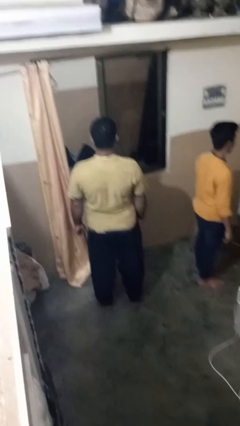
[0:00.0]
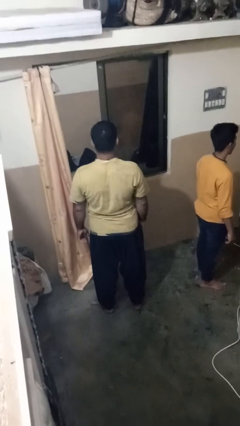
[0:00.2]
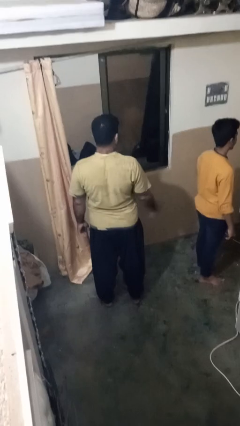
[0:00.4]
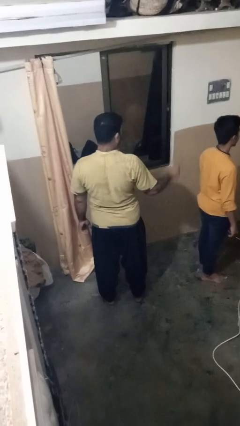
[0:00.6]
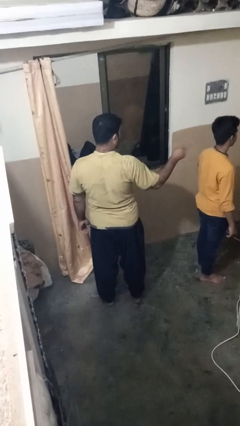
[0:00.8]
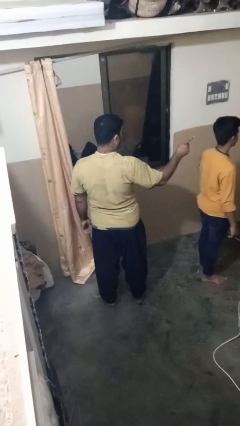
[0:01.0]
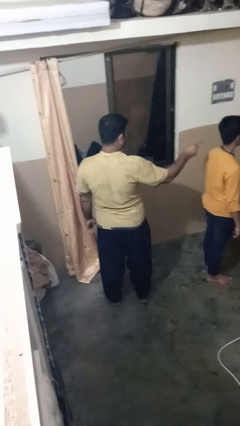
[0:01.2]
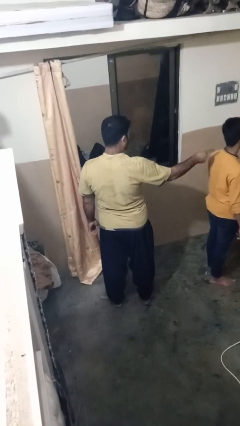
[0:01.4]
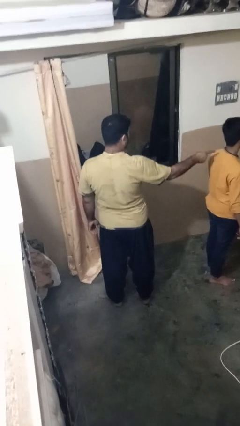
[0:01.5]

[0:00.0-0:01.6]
person points at person

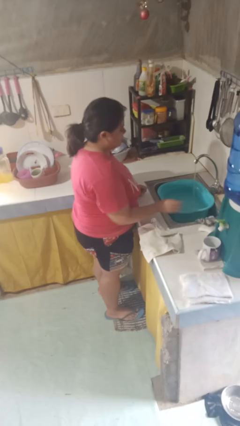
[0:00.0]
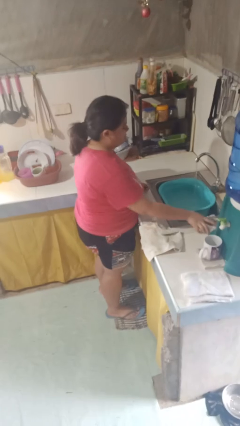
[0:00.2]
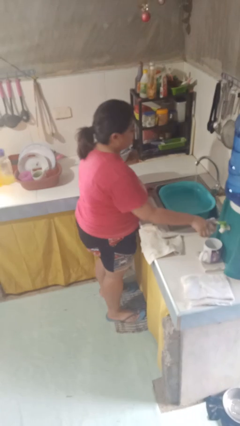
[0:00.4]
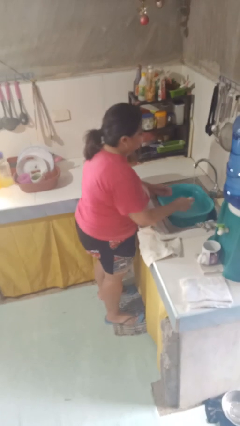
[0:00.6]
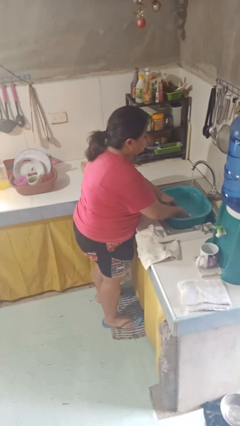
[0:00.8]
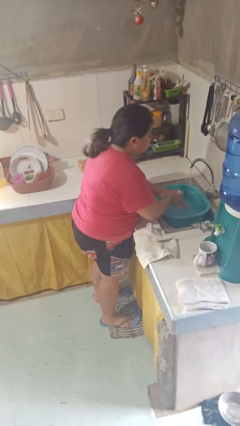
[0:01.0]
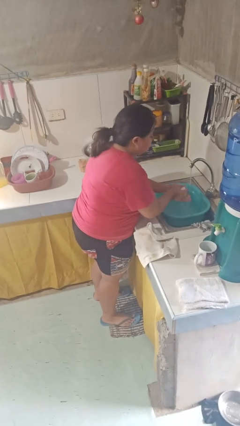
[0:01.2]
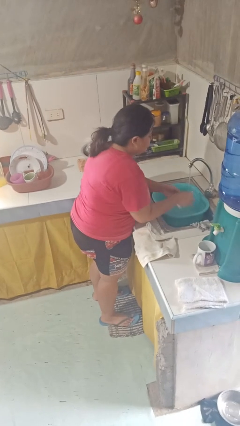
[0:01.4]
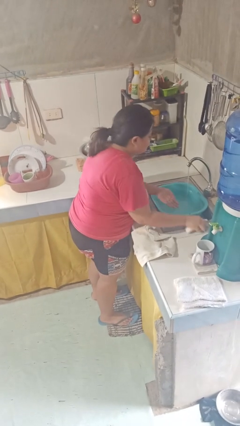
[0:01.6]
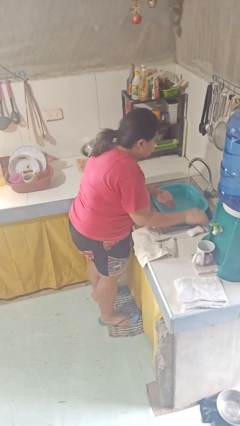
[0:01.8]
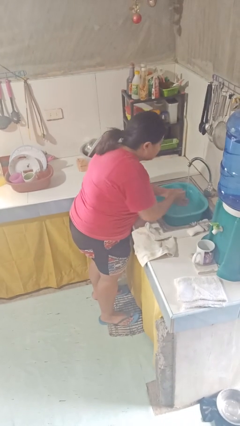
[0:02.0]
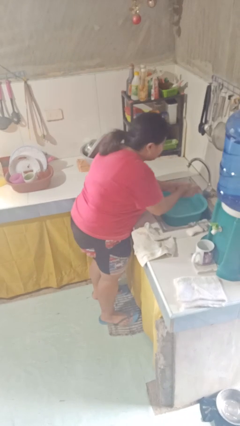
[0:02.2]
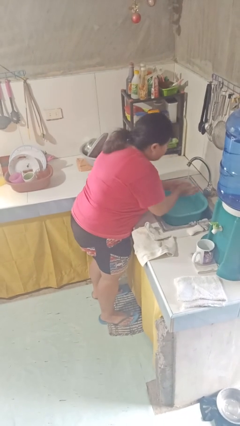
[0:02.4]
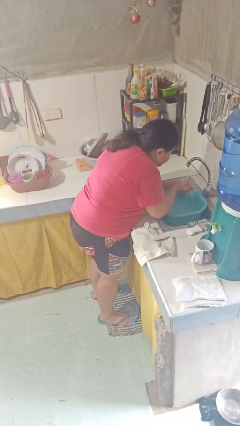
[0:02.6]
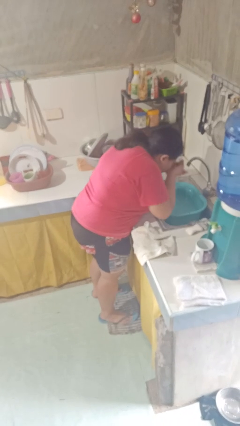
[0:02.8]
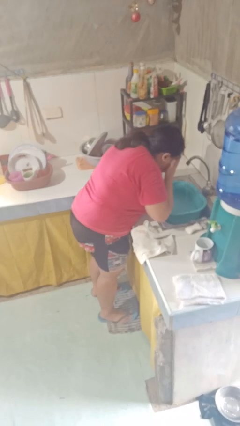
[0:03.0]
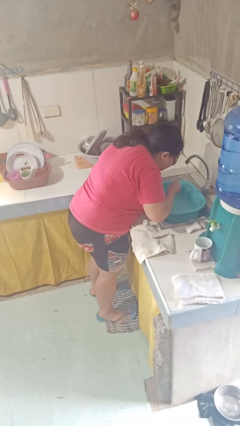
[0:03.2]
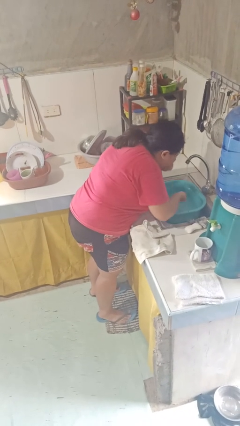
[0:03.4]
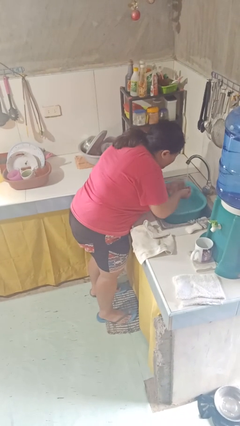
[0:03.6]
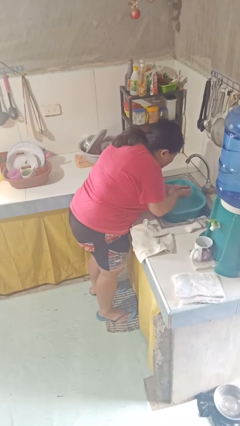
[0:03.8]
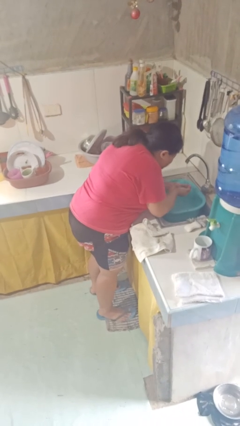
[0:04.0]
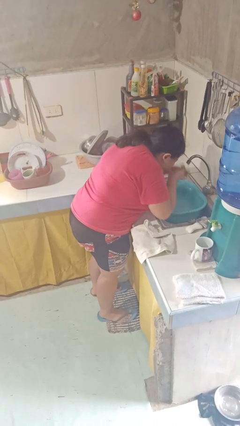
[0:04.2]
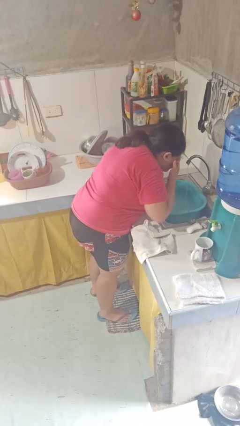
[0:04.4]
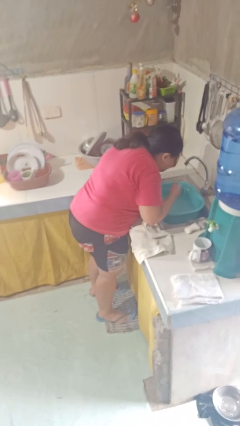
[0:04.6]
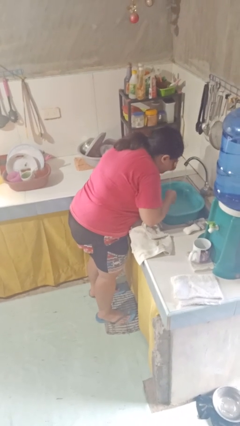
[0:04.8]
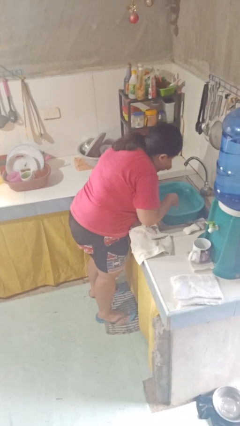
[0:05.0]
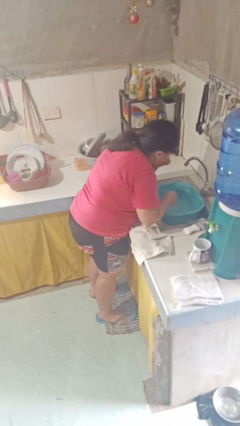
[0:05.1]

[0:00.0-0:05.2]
person washes face

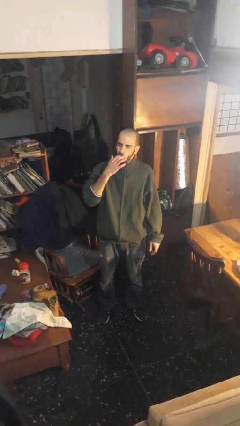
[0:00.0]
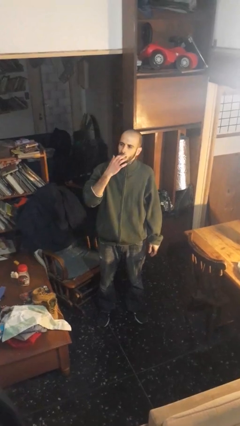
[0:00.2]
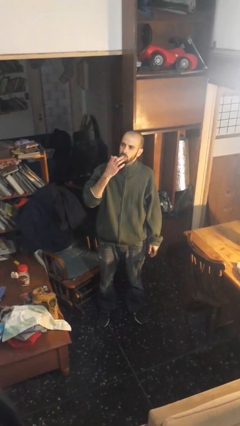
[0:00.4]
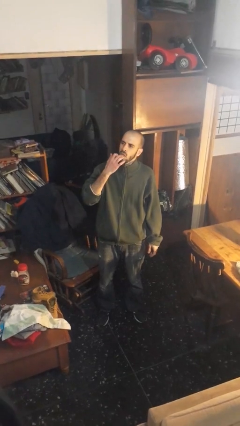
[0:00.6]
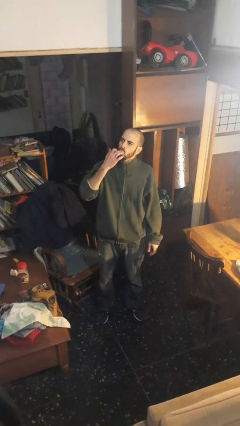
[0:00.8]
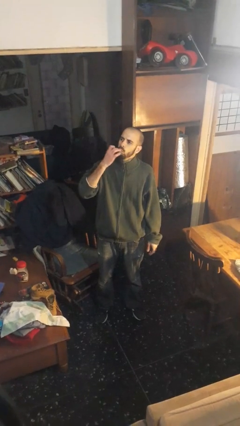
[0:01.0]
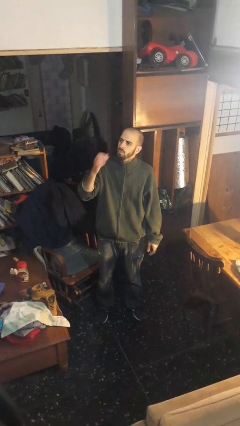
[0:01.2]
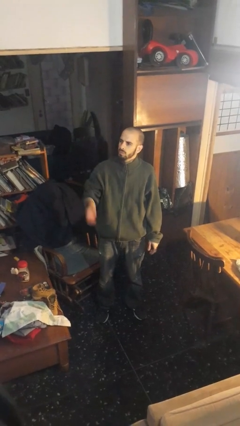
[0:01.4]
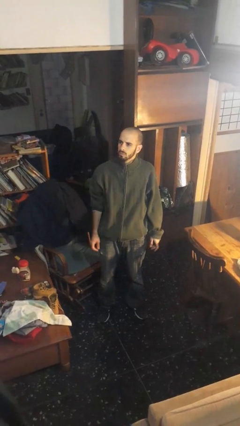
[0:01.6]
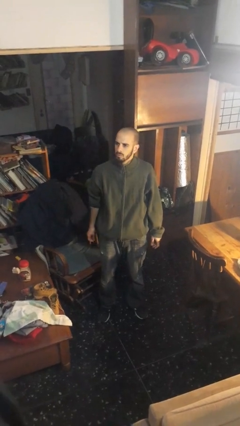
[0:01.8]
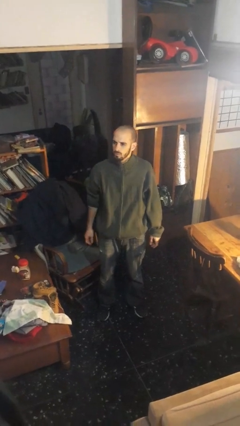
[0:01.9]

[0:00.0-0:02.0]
person licks fingers

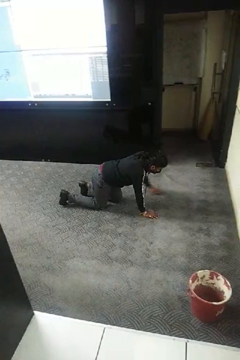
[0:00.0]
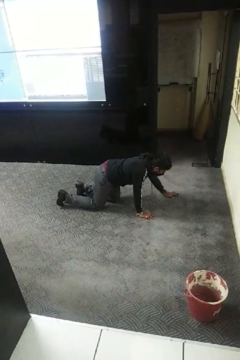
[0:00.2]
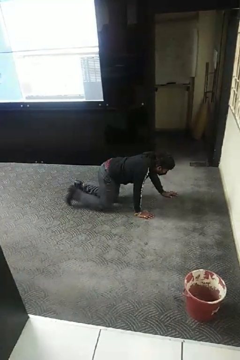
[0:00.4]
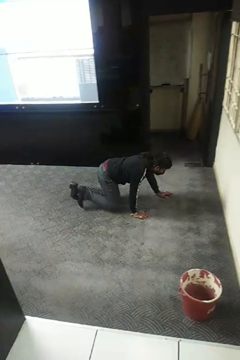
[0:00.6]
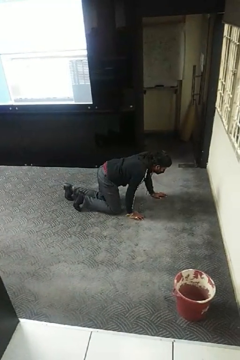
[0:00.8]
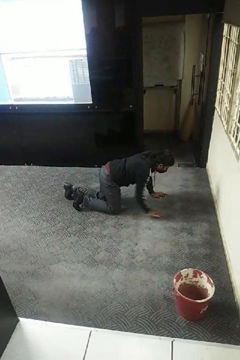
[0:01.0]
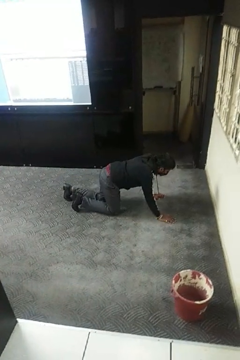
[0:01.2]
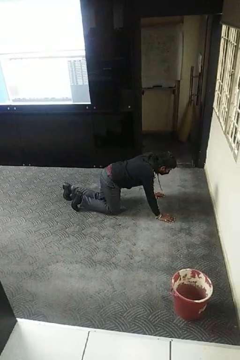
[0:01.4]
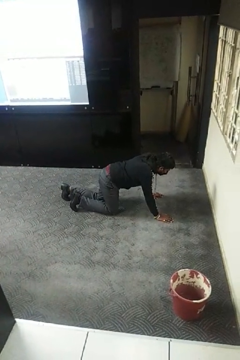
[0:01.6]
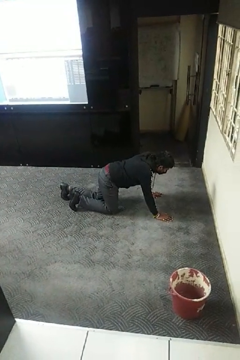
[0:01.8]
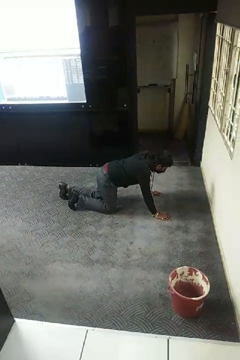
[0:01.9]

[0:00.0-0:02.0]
person crawls

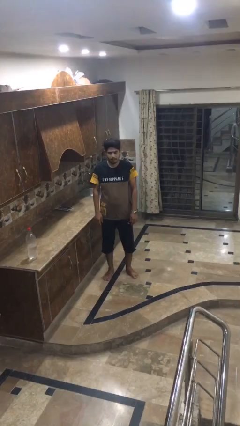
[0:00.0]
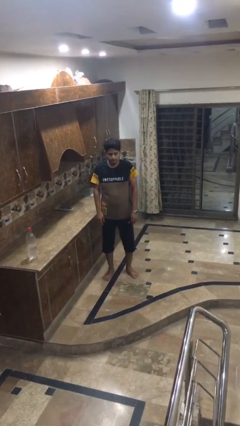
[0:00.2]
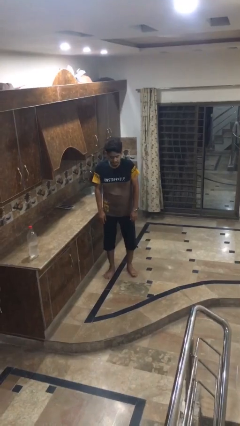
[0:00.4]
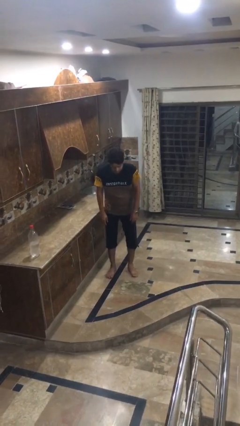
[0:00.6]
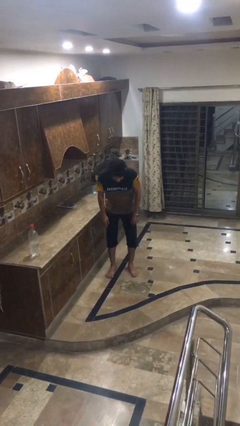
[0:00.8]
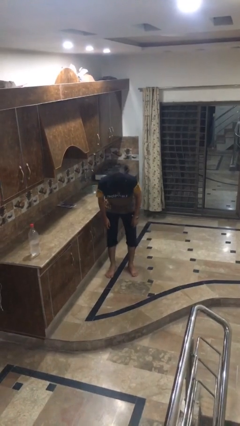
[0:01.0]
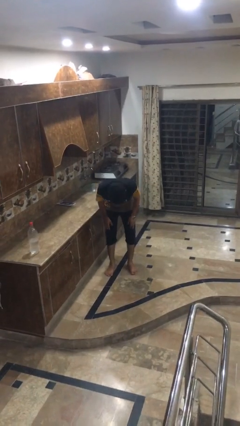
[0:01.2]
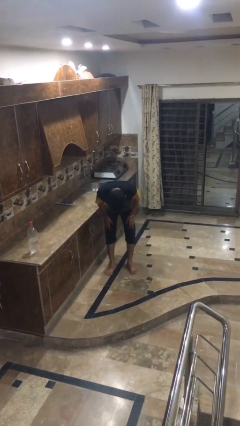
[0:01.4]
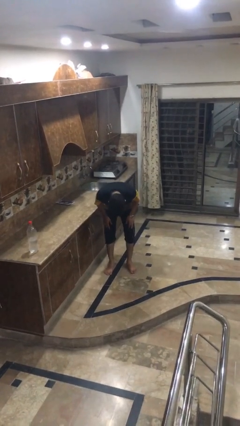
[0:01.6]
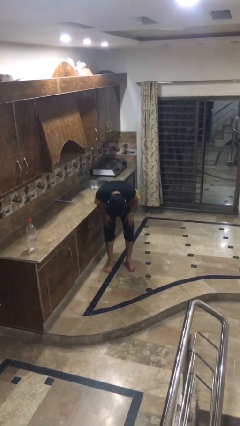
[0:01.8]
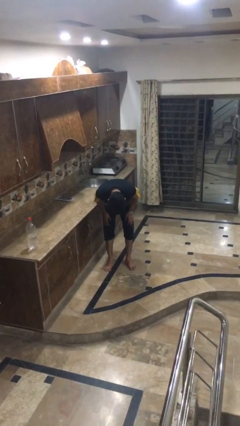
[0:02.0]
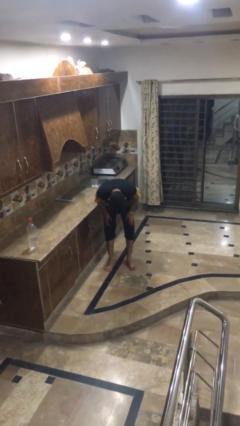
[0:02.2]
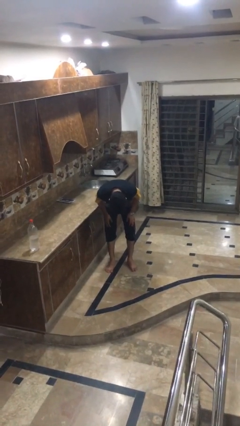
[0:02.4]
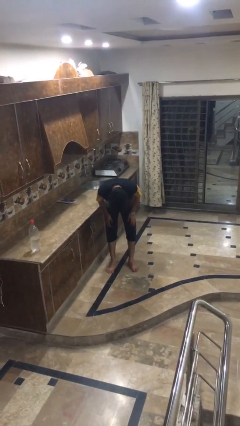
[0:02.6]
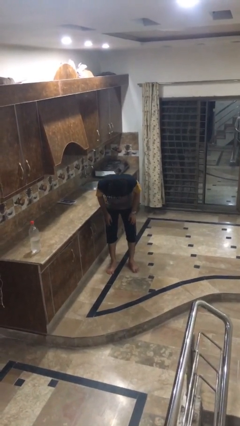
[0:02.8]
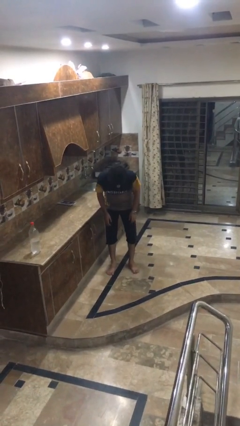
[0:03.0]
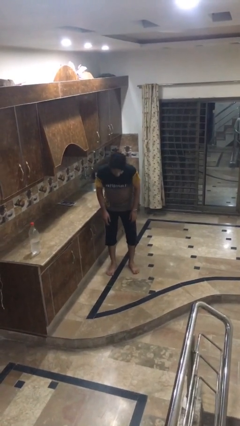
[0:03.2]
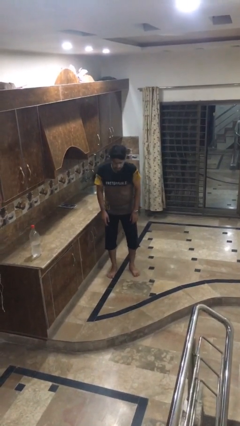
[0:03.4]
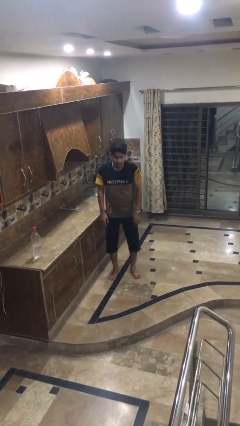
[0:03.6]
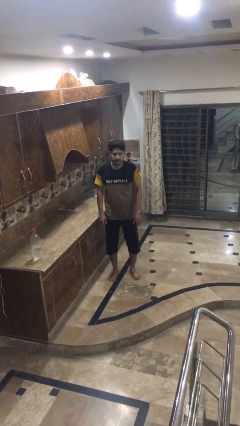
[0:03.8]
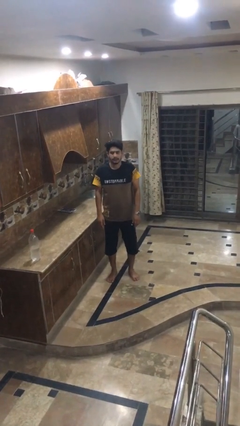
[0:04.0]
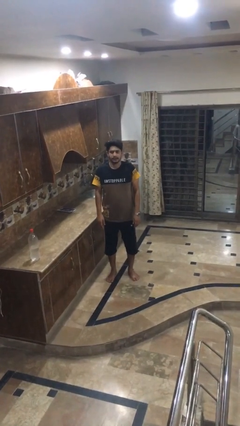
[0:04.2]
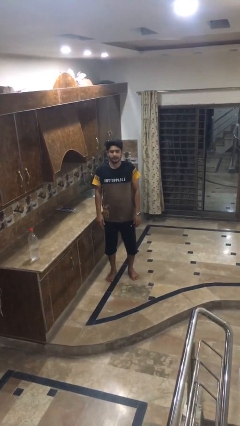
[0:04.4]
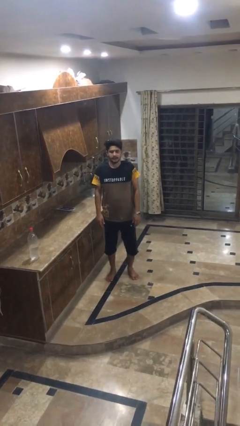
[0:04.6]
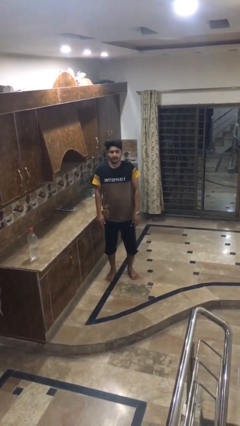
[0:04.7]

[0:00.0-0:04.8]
person bows

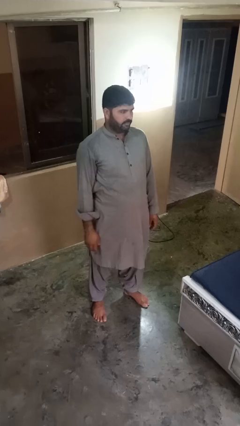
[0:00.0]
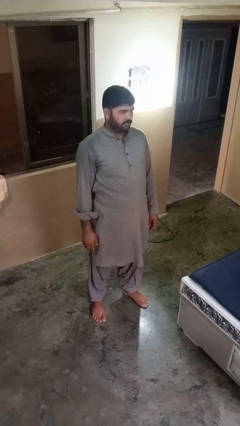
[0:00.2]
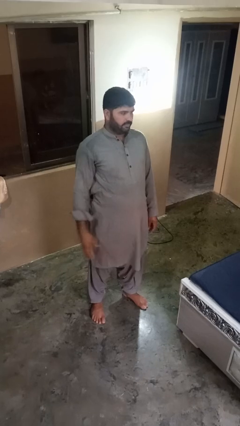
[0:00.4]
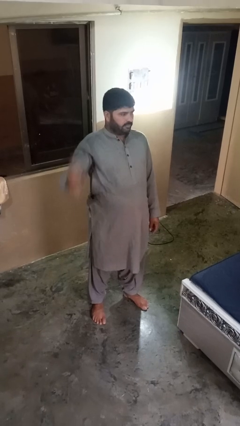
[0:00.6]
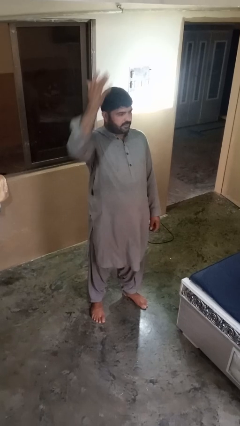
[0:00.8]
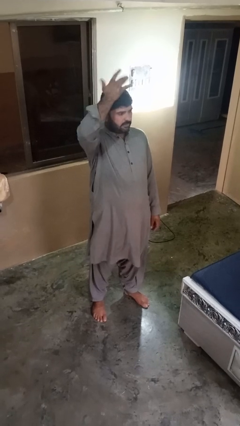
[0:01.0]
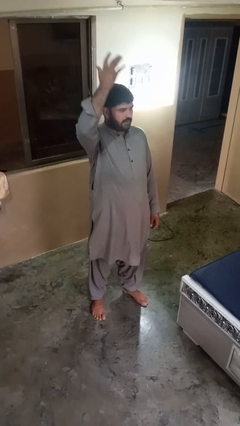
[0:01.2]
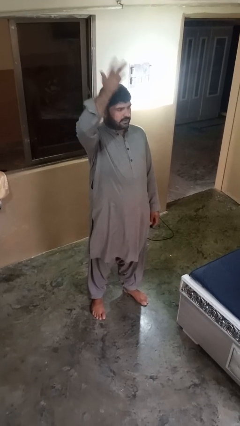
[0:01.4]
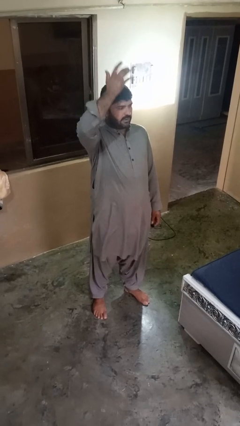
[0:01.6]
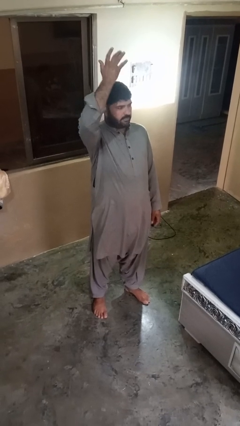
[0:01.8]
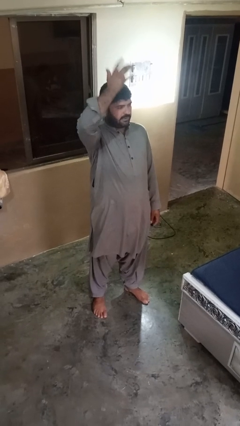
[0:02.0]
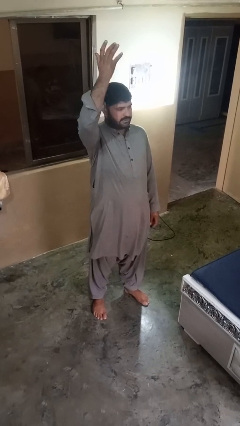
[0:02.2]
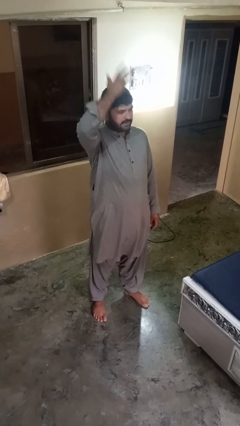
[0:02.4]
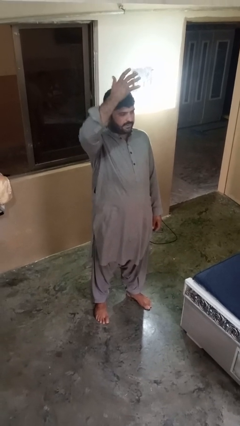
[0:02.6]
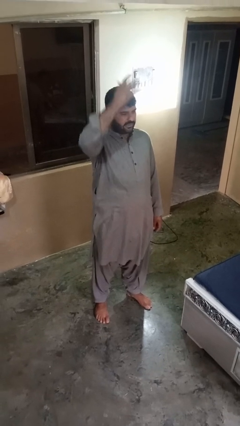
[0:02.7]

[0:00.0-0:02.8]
person pats head
